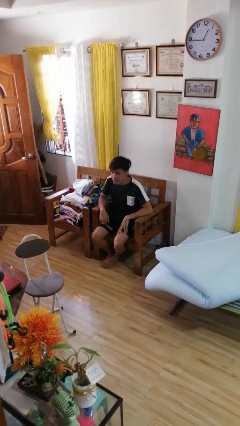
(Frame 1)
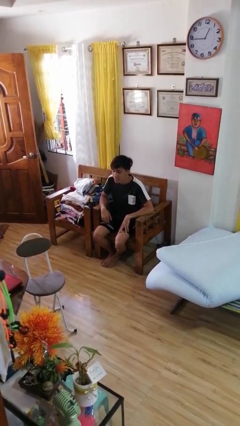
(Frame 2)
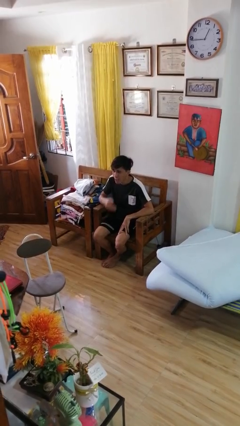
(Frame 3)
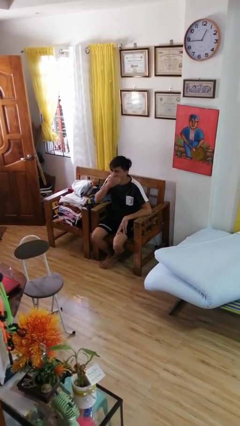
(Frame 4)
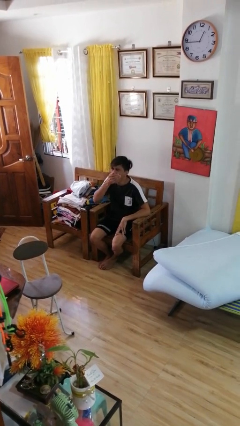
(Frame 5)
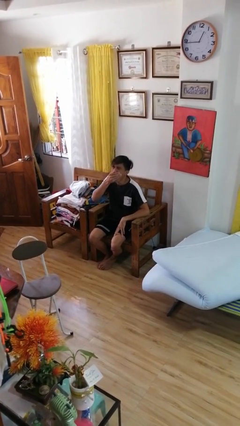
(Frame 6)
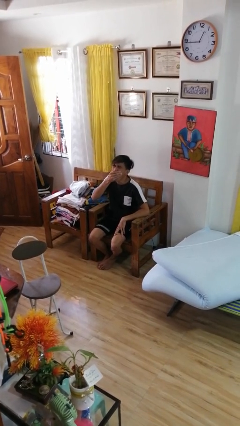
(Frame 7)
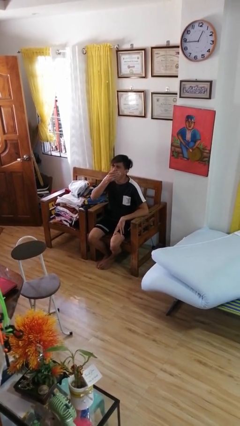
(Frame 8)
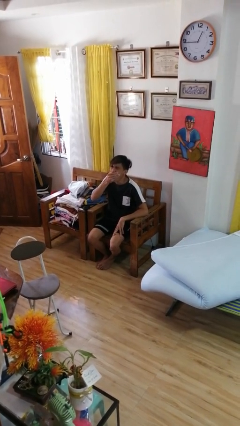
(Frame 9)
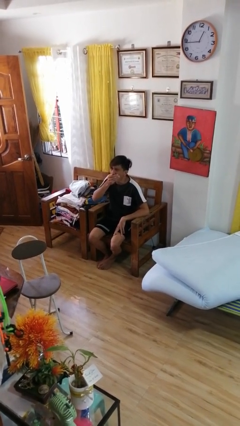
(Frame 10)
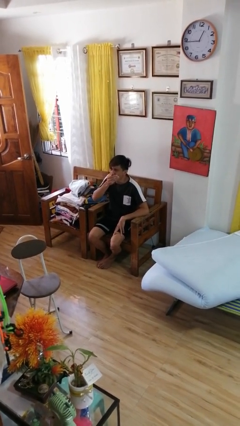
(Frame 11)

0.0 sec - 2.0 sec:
person yawns

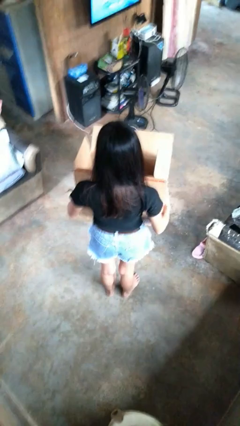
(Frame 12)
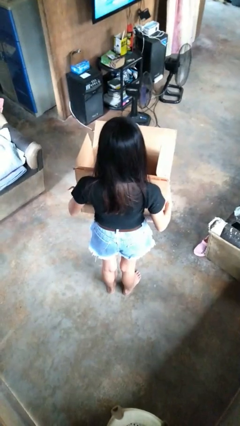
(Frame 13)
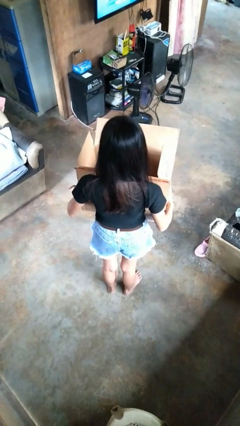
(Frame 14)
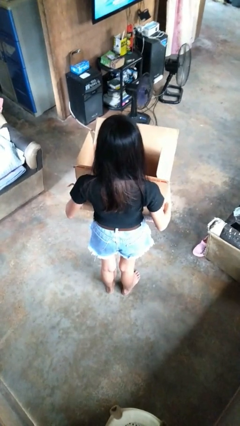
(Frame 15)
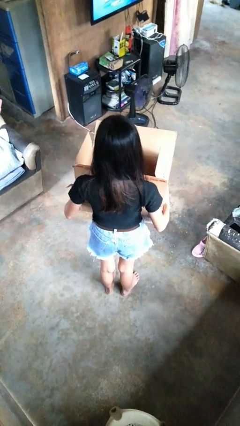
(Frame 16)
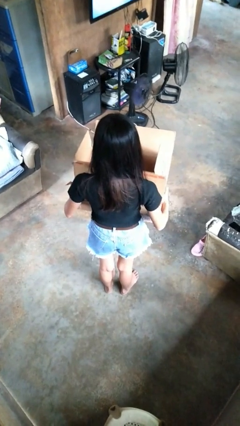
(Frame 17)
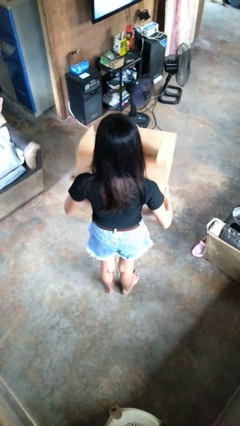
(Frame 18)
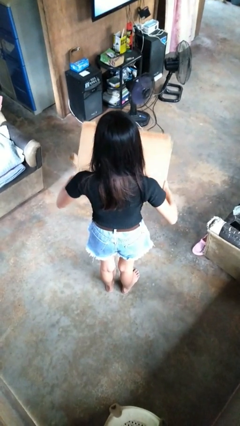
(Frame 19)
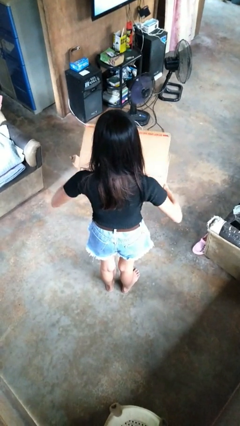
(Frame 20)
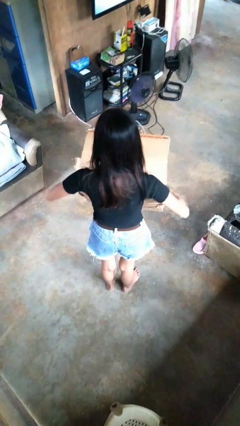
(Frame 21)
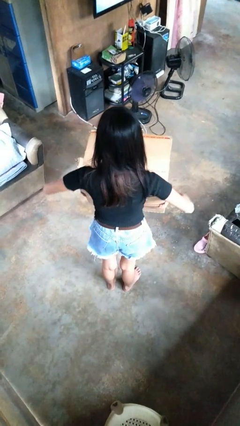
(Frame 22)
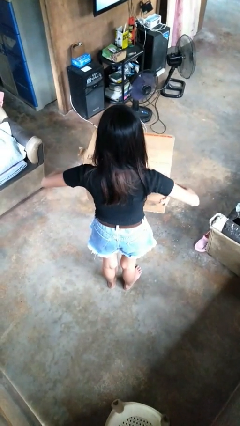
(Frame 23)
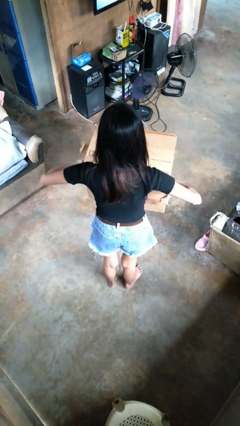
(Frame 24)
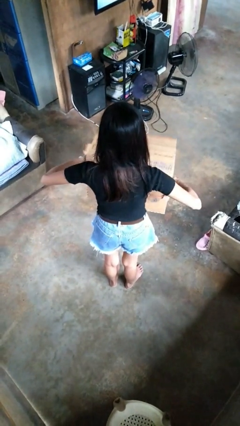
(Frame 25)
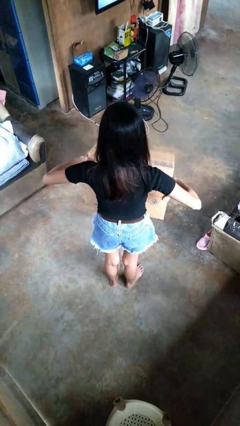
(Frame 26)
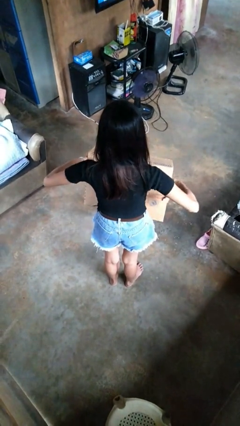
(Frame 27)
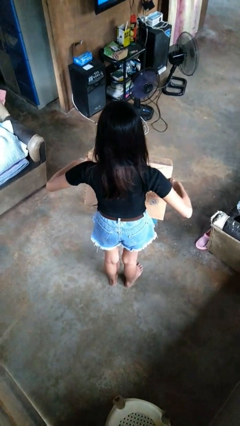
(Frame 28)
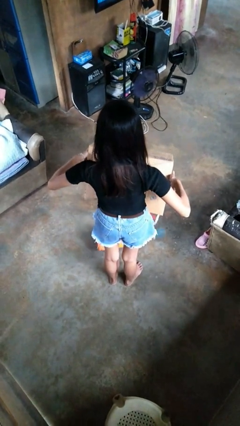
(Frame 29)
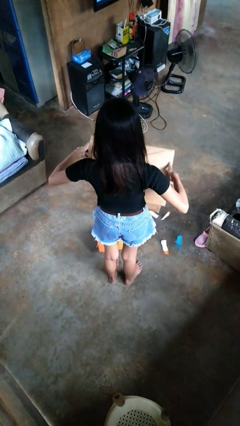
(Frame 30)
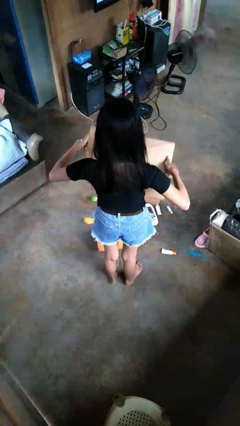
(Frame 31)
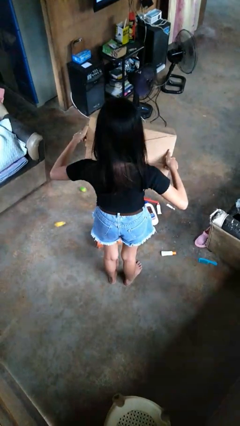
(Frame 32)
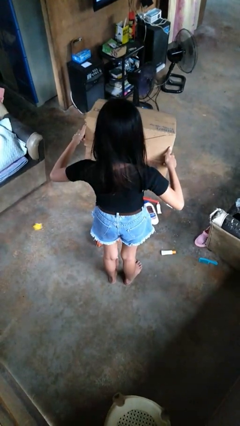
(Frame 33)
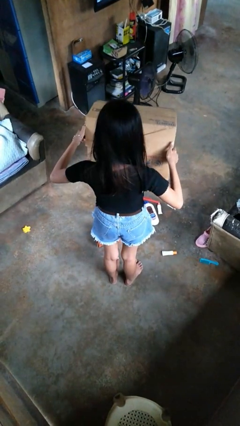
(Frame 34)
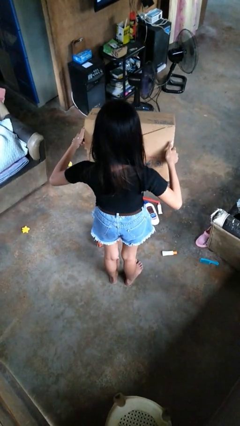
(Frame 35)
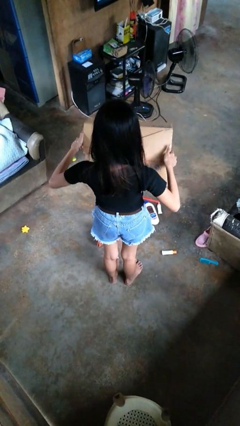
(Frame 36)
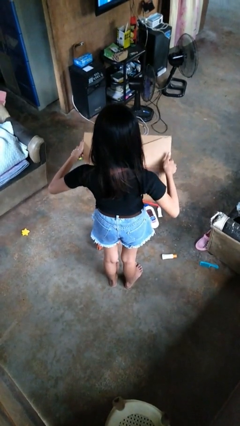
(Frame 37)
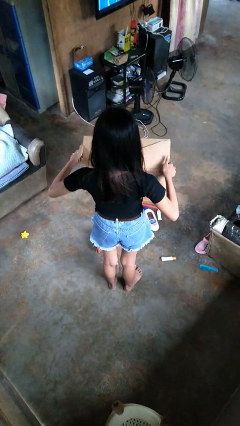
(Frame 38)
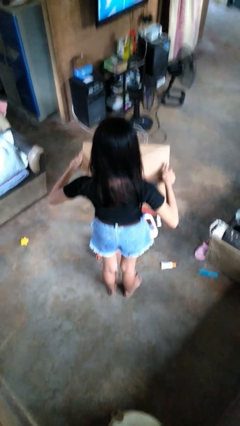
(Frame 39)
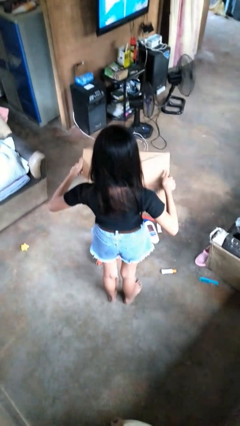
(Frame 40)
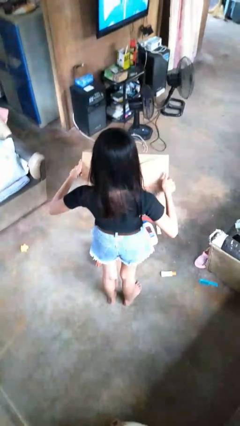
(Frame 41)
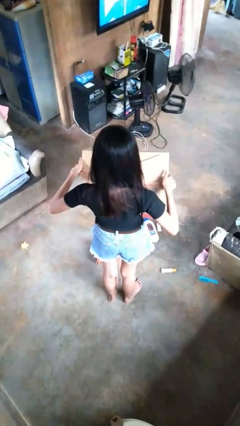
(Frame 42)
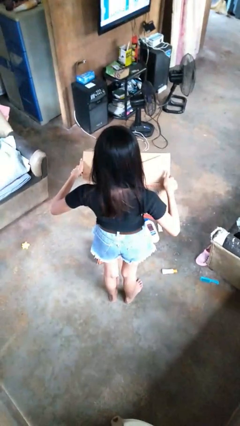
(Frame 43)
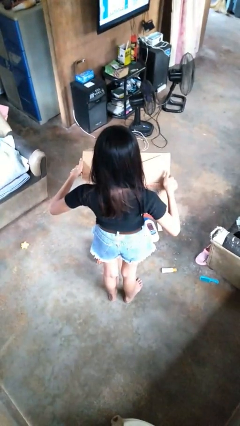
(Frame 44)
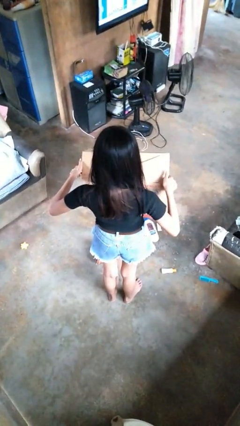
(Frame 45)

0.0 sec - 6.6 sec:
person unloads box onto floor

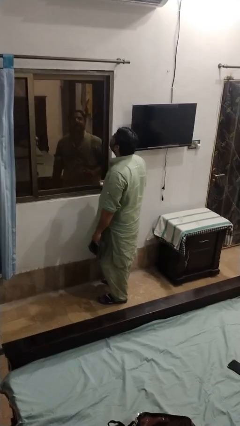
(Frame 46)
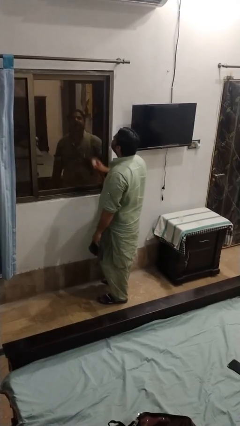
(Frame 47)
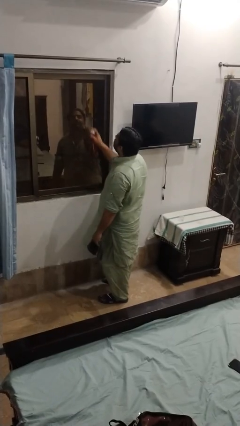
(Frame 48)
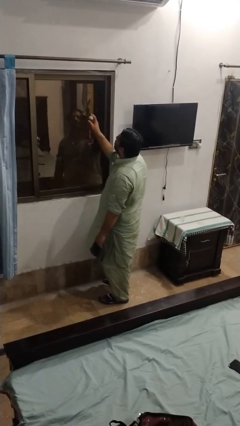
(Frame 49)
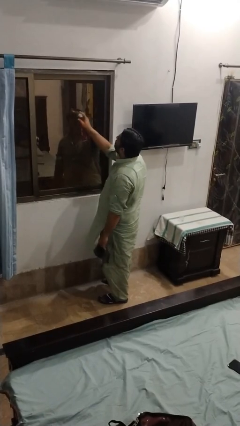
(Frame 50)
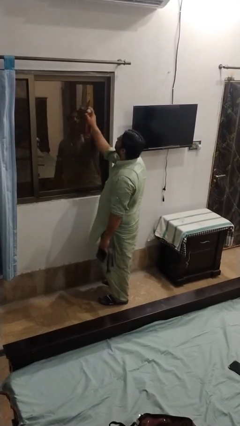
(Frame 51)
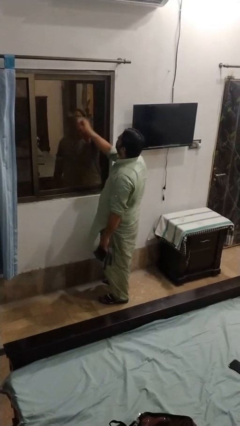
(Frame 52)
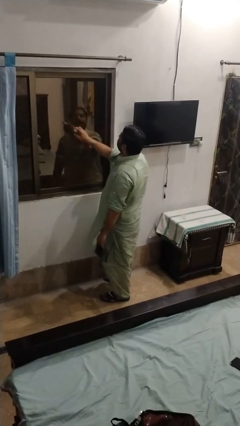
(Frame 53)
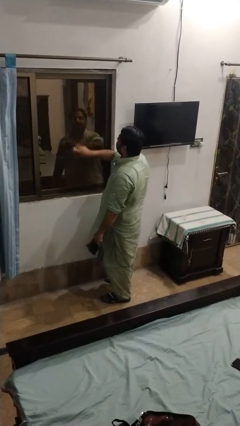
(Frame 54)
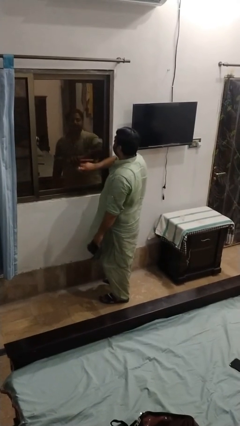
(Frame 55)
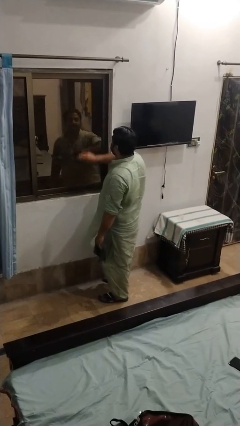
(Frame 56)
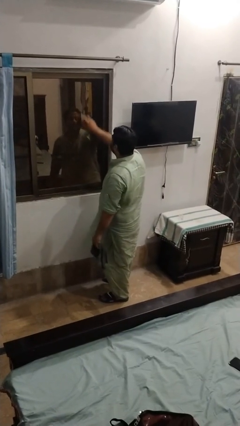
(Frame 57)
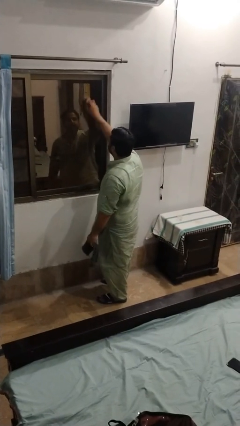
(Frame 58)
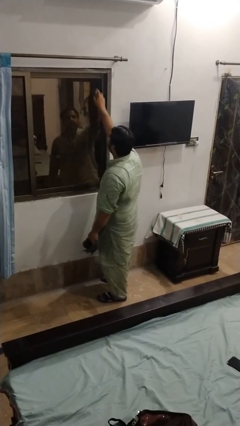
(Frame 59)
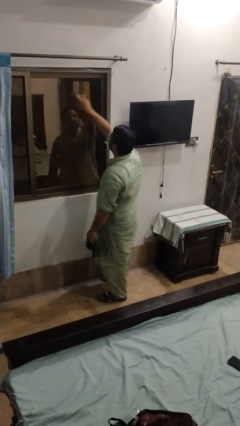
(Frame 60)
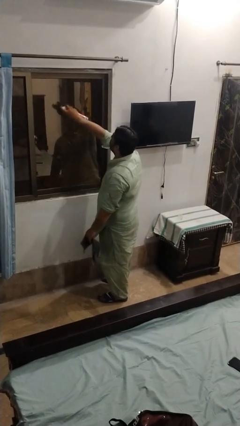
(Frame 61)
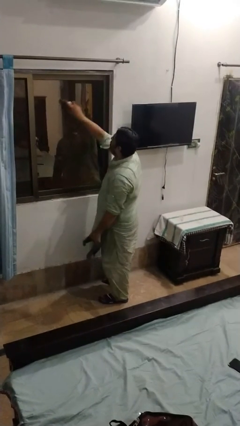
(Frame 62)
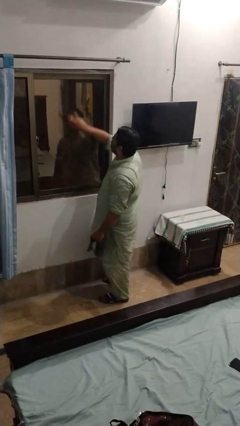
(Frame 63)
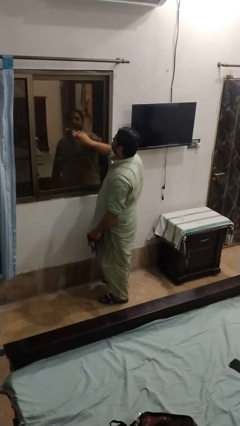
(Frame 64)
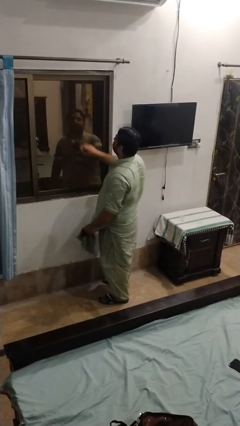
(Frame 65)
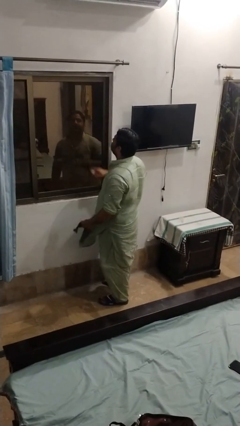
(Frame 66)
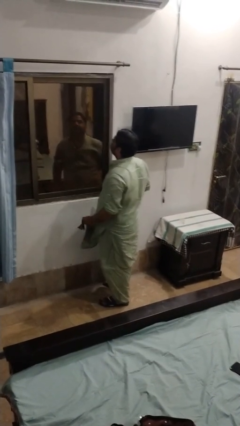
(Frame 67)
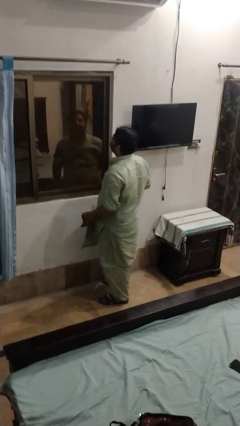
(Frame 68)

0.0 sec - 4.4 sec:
person sprays from bottle

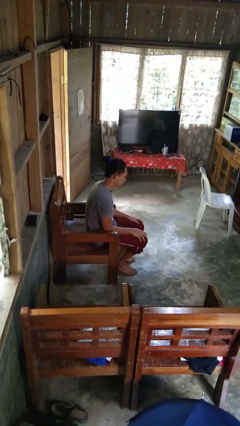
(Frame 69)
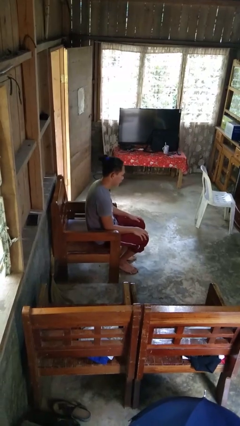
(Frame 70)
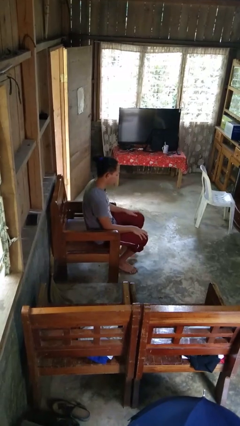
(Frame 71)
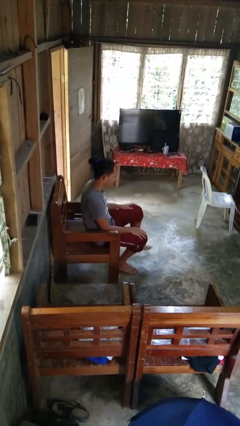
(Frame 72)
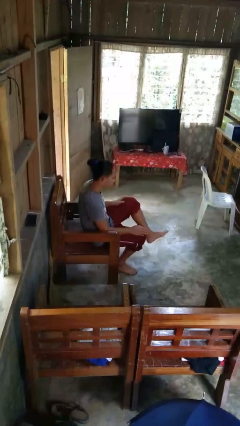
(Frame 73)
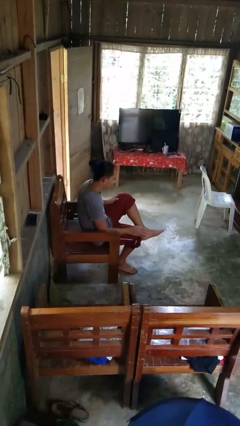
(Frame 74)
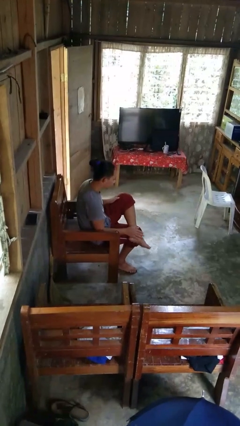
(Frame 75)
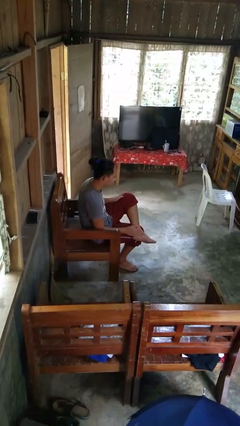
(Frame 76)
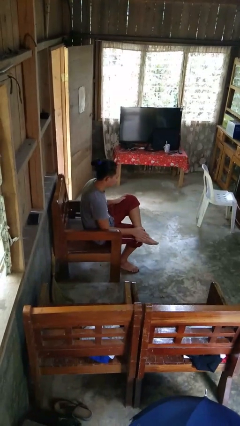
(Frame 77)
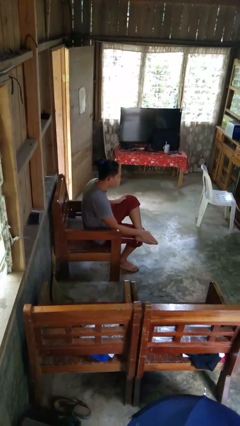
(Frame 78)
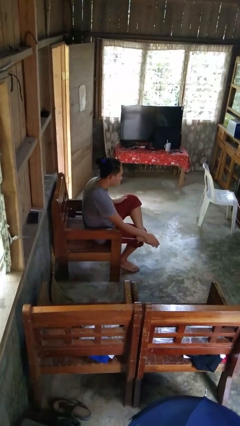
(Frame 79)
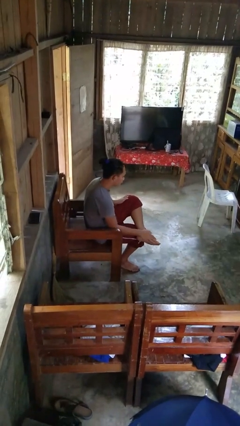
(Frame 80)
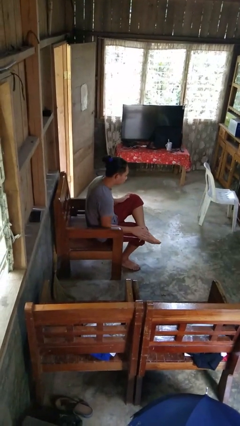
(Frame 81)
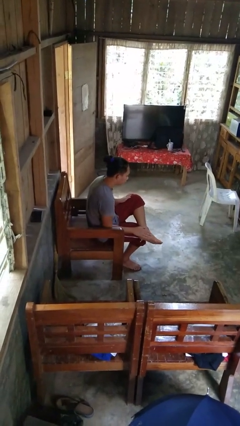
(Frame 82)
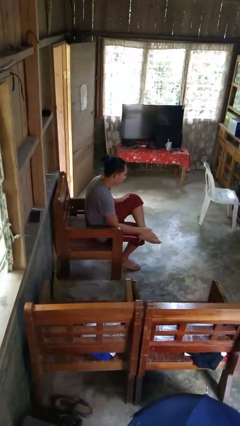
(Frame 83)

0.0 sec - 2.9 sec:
person rubs foot

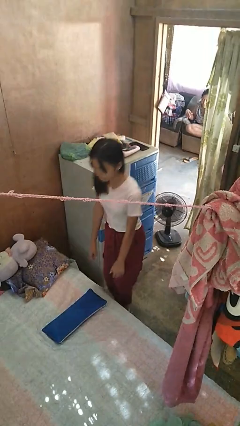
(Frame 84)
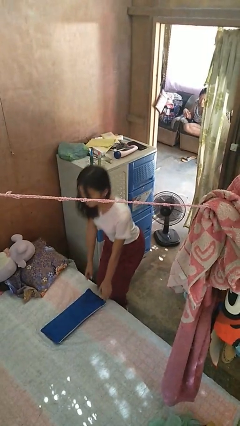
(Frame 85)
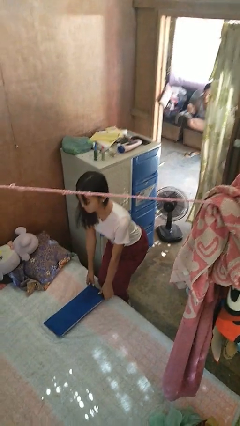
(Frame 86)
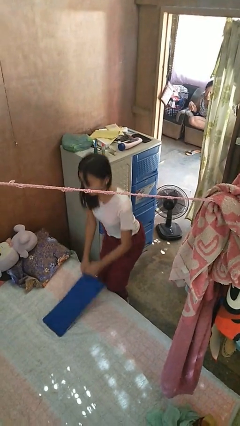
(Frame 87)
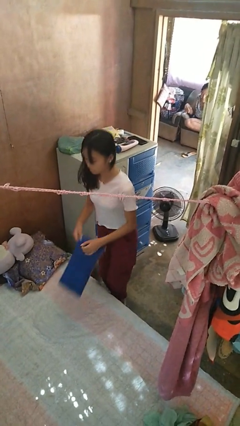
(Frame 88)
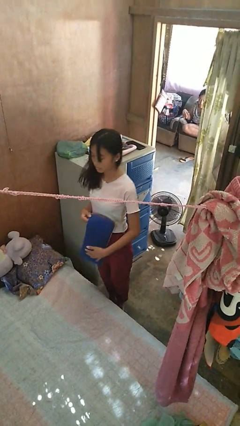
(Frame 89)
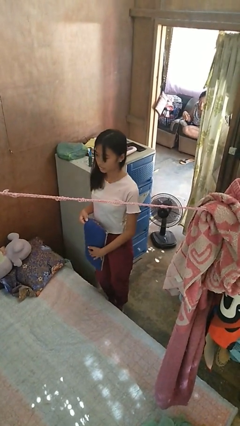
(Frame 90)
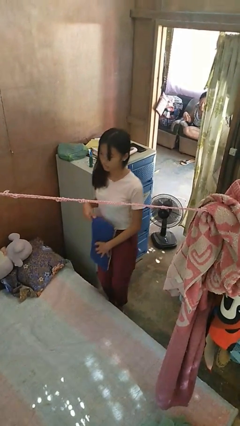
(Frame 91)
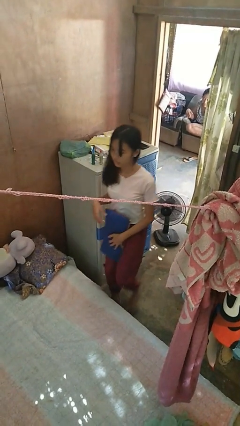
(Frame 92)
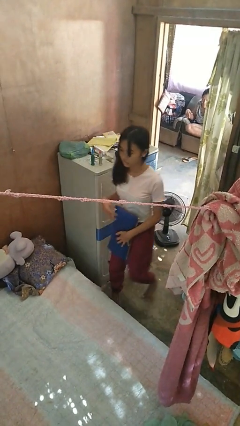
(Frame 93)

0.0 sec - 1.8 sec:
person picks up object from bed

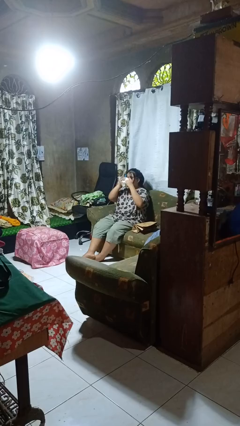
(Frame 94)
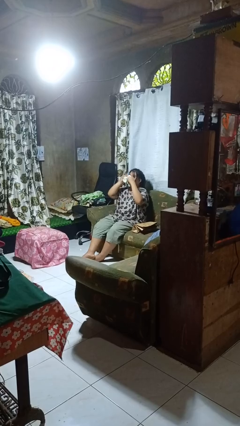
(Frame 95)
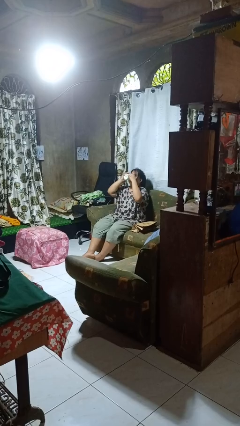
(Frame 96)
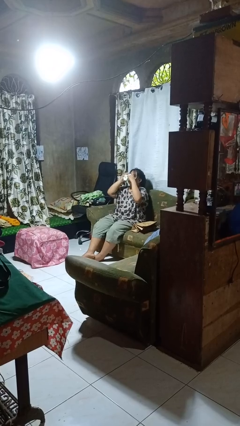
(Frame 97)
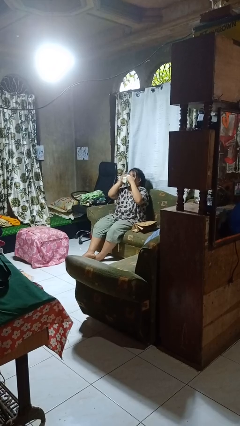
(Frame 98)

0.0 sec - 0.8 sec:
person drinks from mug
